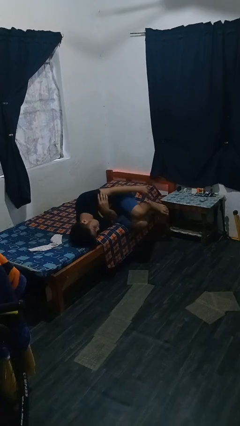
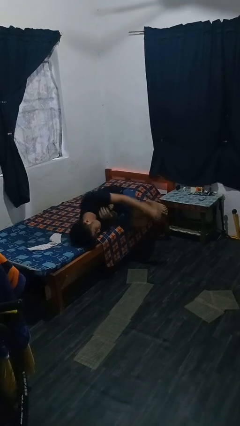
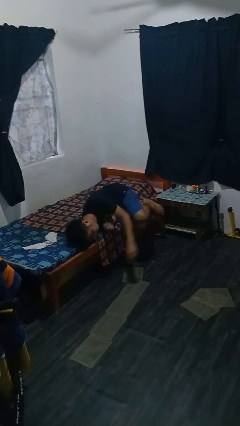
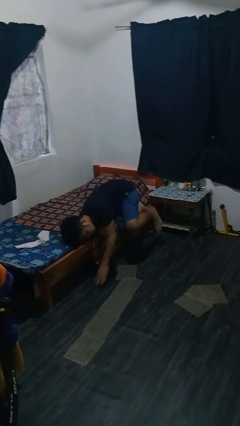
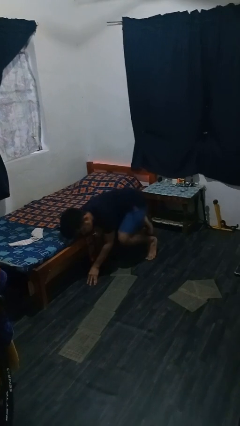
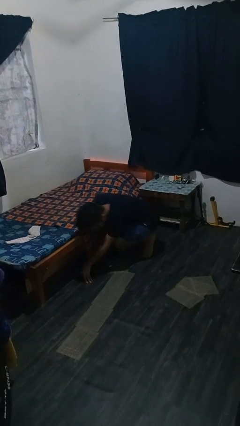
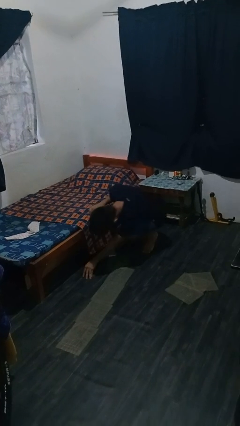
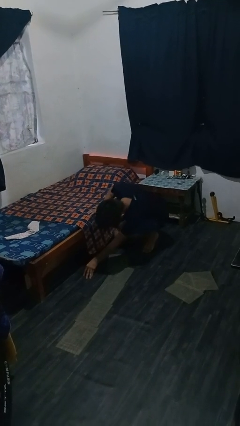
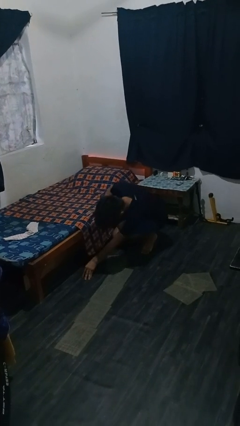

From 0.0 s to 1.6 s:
person falls from bed

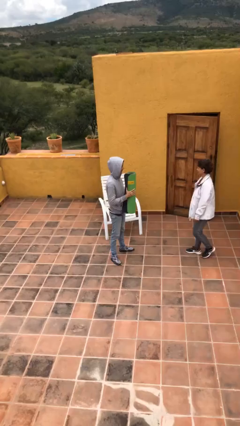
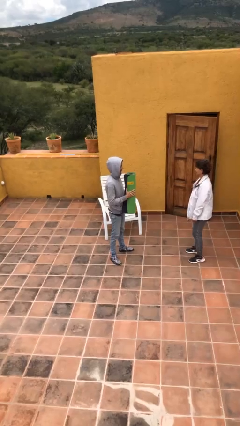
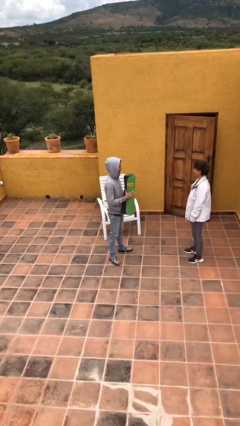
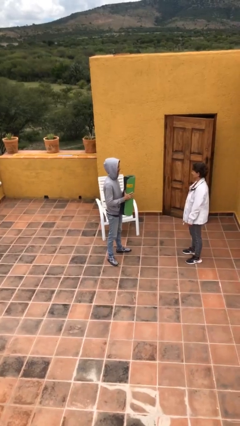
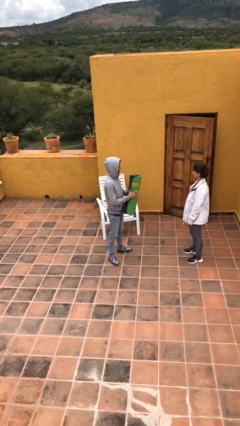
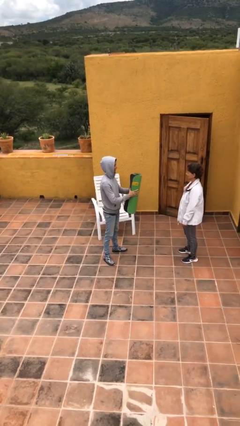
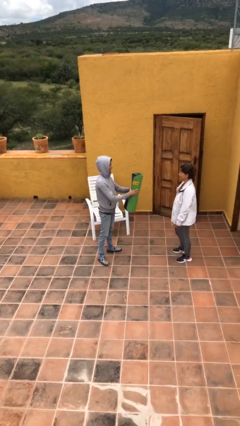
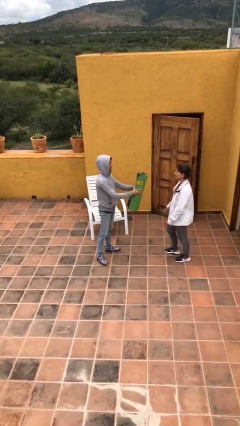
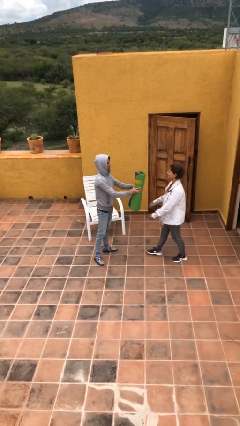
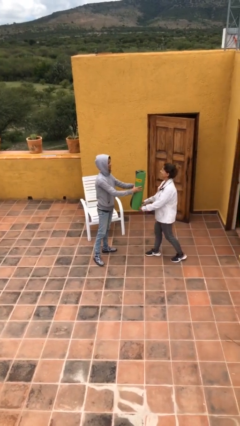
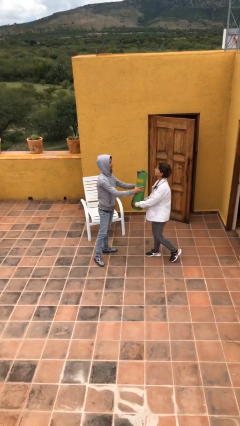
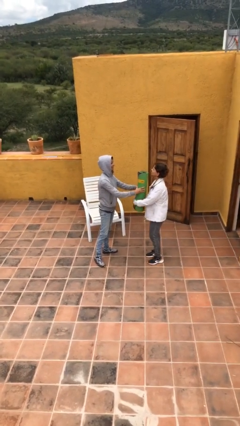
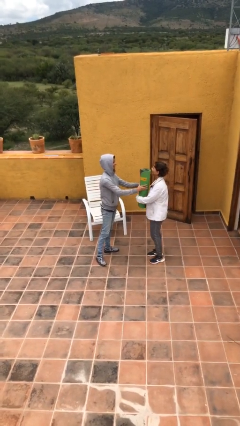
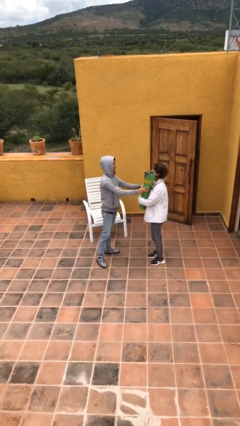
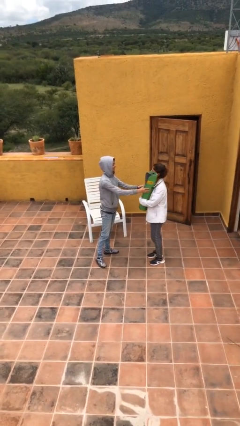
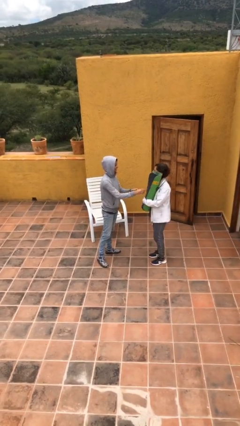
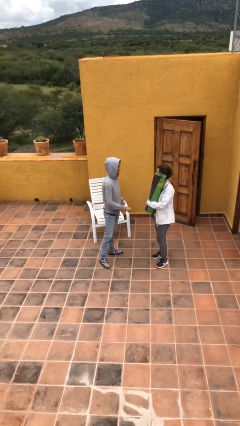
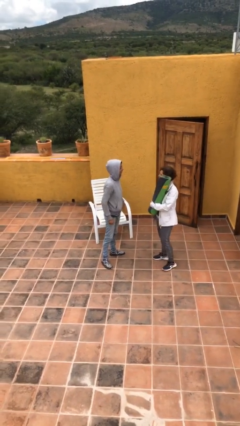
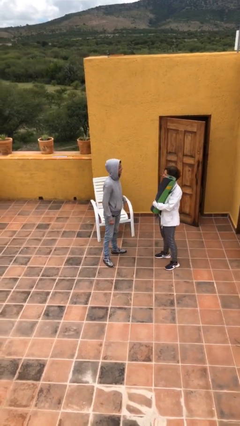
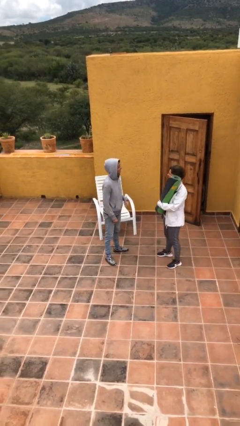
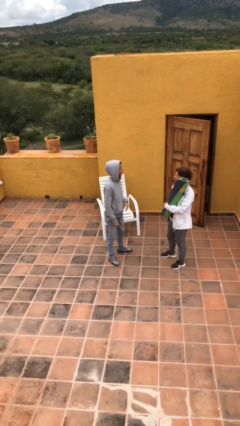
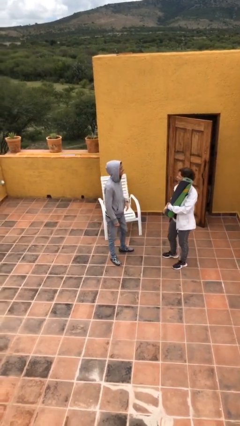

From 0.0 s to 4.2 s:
person transfers object to person

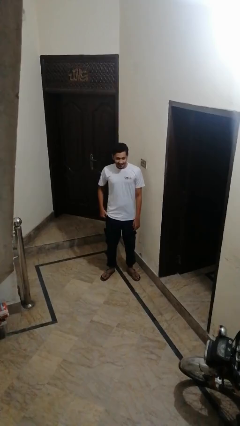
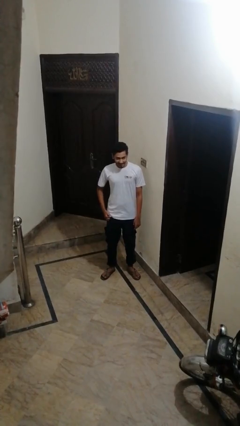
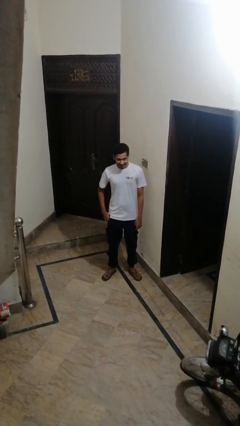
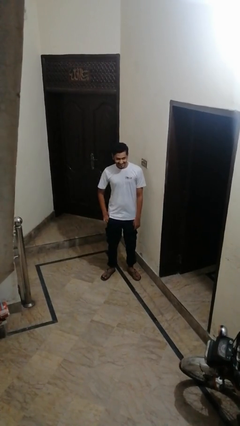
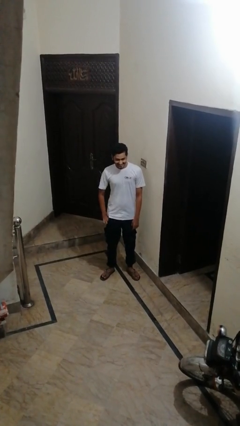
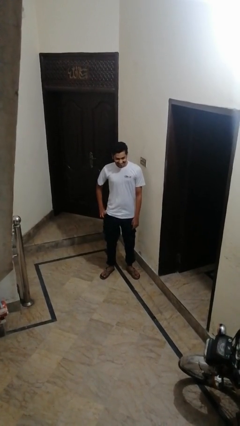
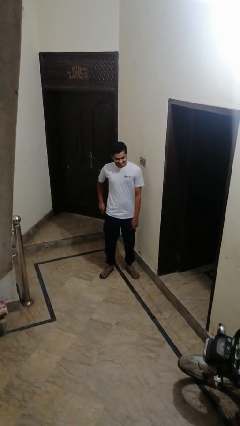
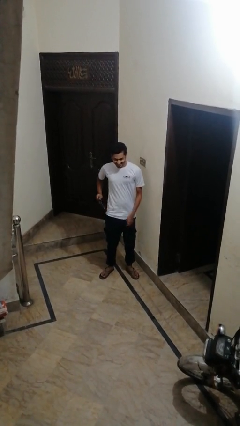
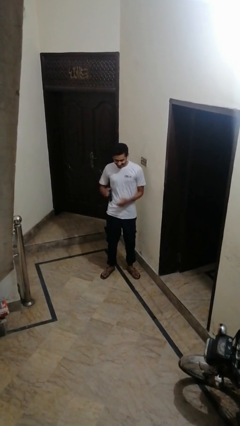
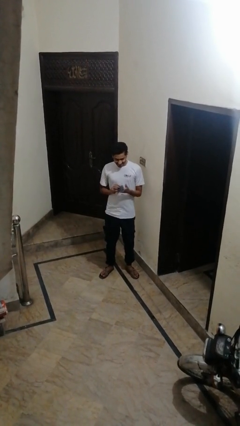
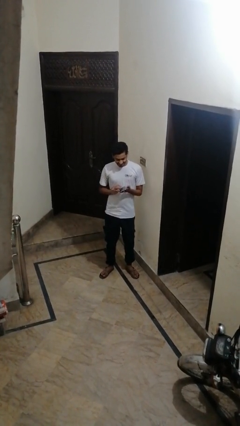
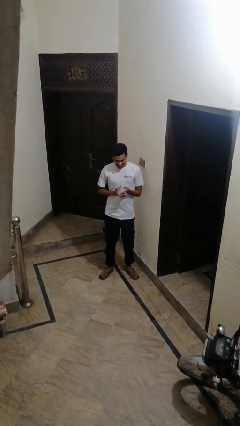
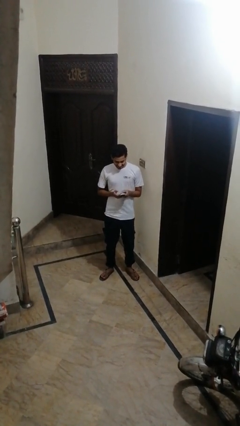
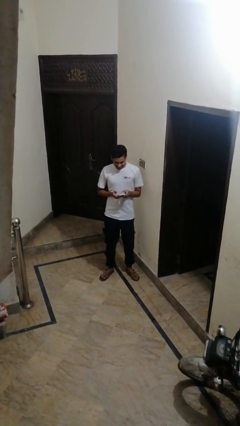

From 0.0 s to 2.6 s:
person shoves person

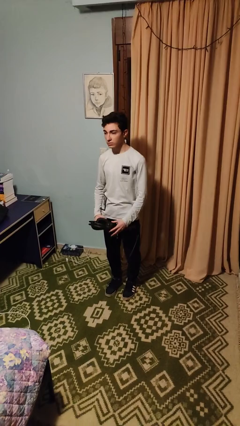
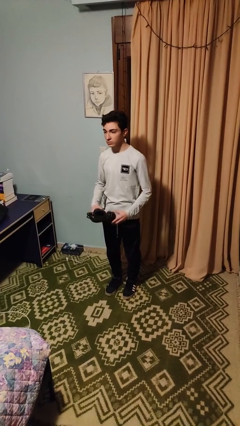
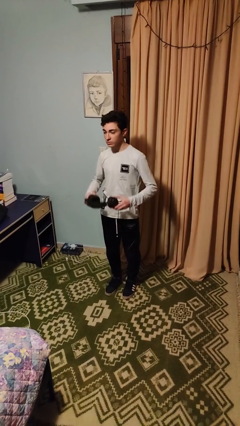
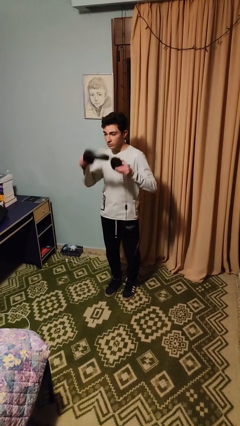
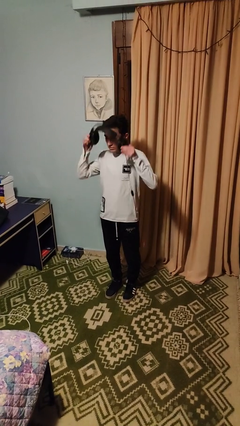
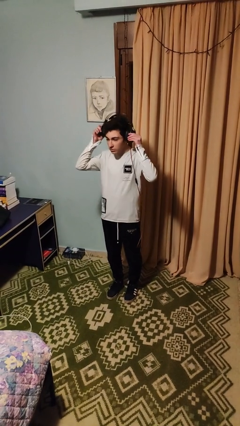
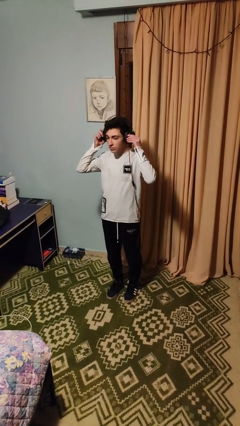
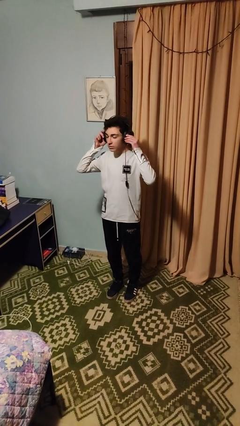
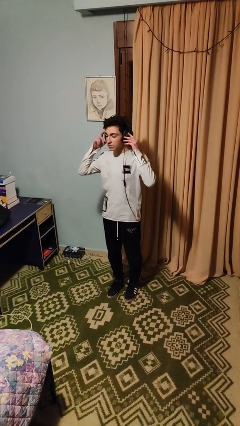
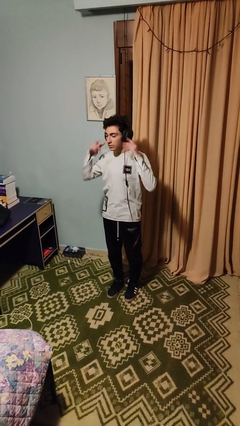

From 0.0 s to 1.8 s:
person puts on headphones

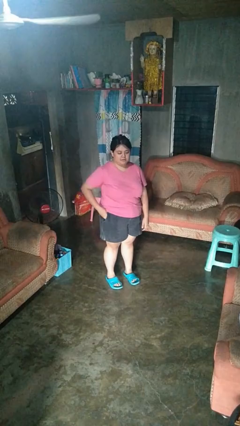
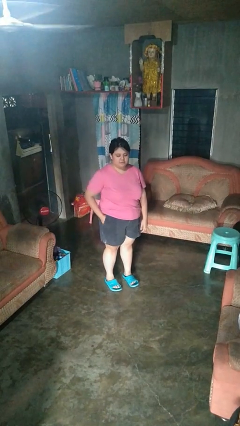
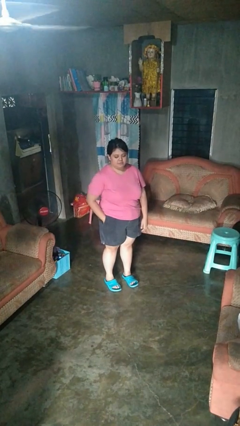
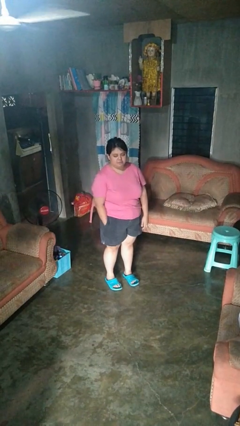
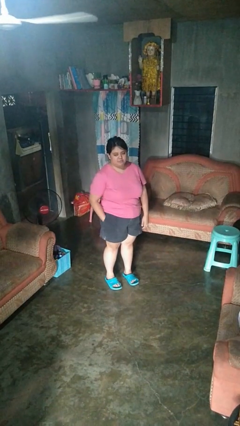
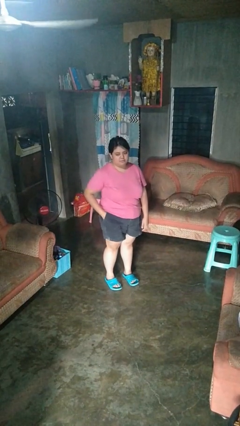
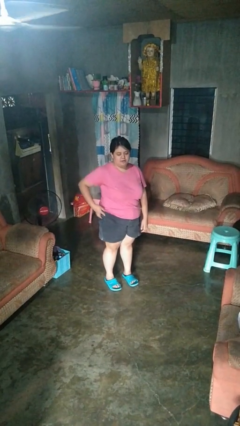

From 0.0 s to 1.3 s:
person takes phone from pocket

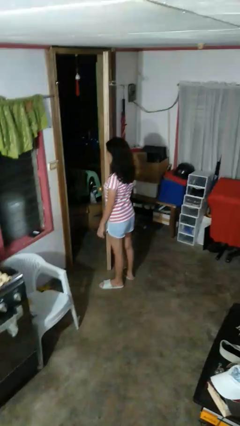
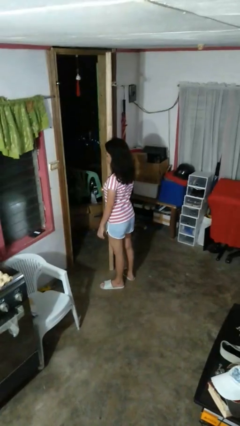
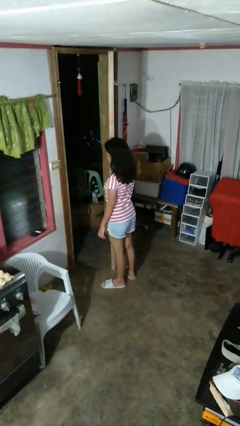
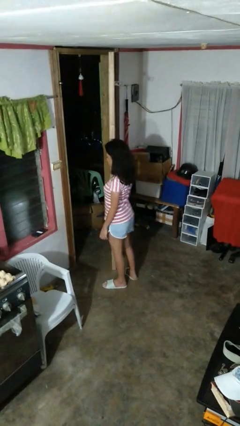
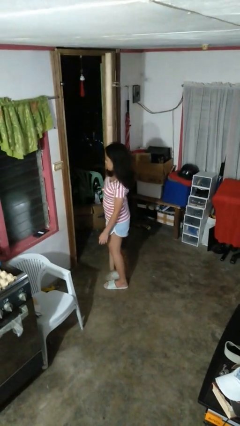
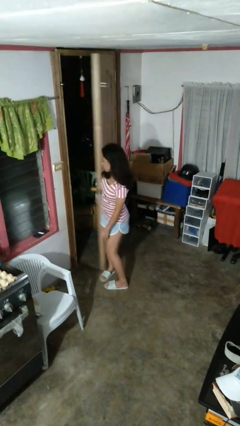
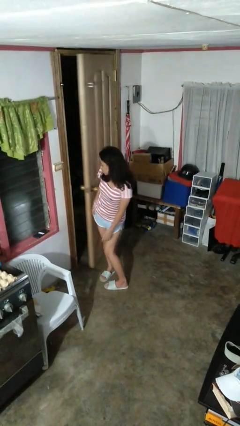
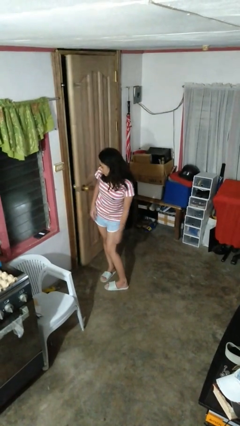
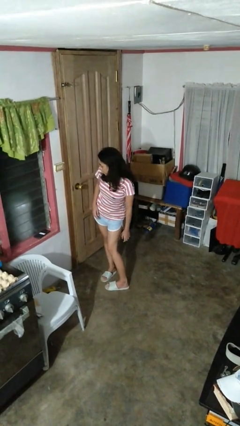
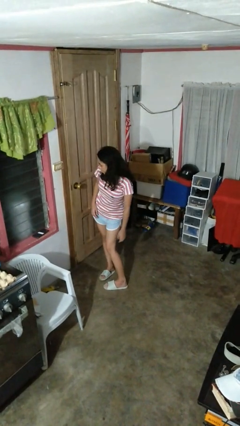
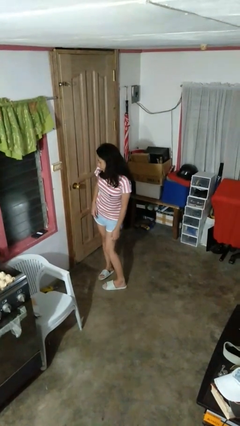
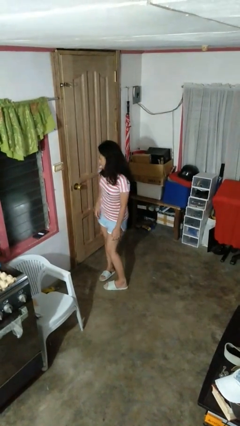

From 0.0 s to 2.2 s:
person closes door with hip

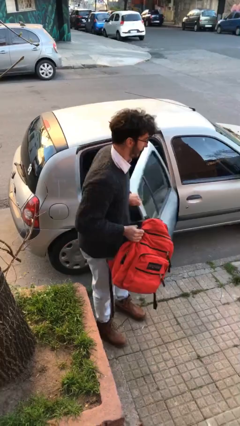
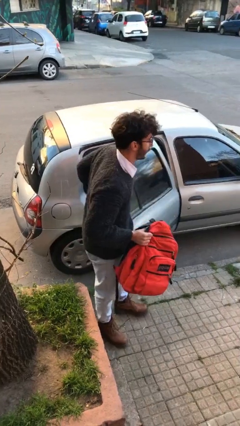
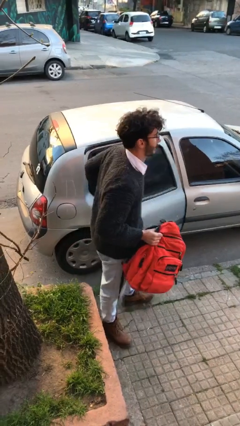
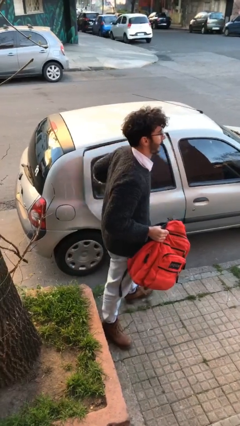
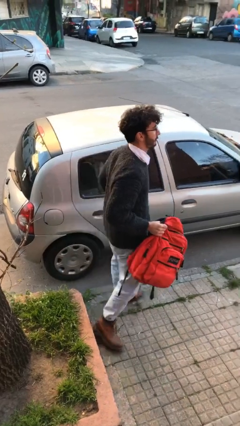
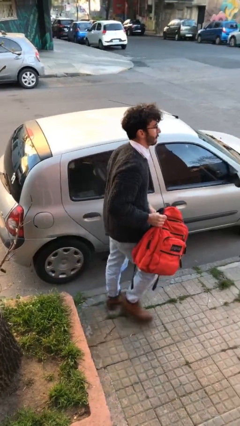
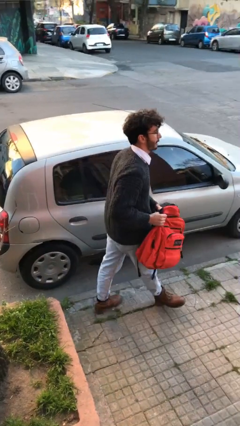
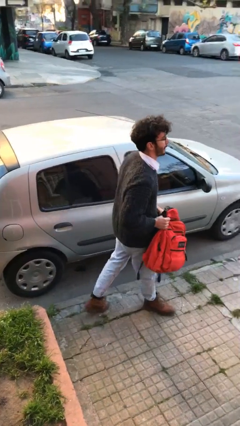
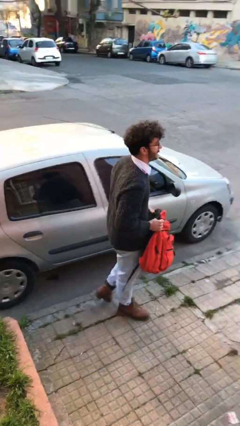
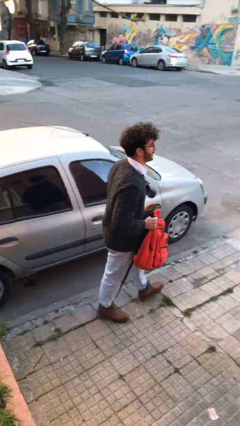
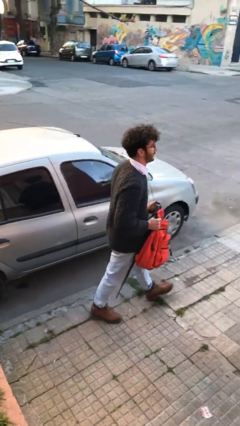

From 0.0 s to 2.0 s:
person closes car door

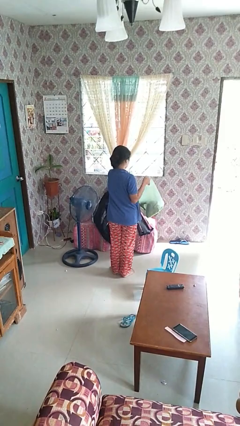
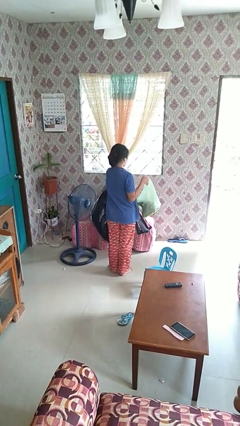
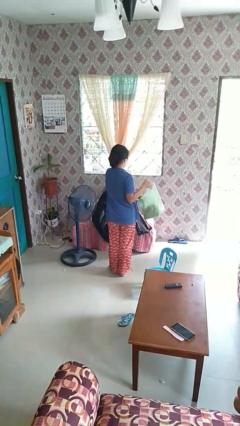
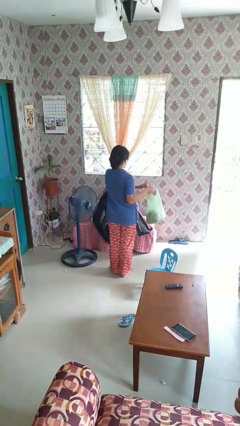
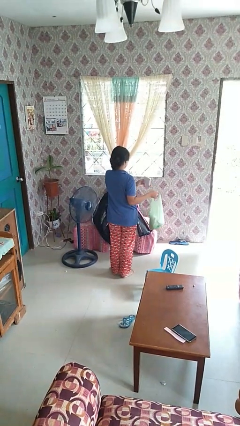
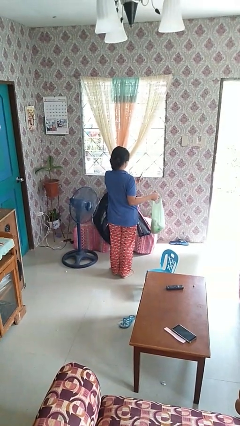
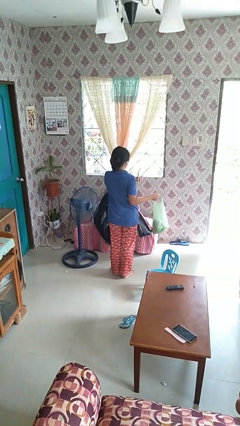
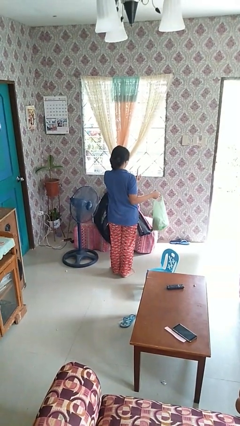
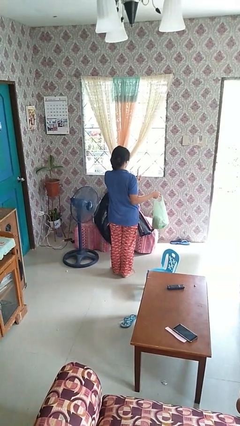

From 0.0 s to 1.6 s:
person takes object from bag
